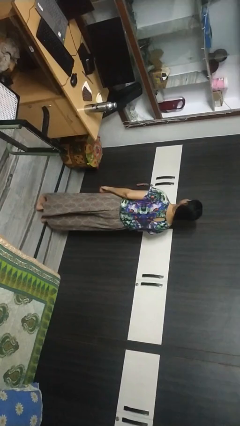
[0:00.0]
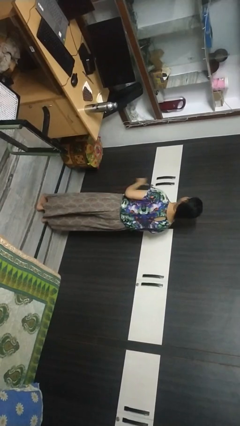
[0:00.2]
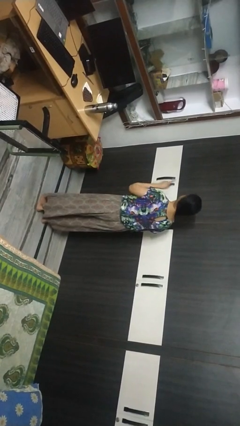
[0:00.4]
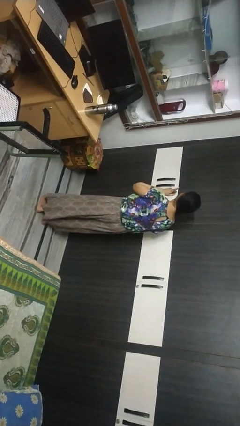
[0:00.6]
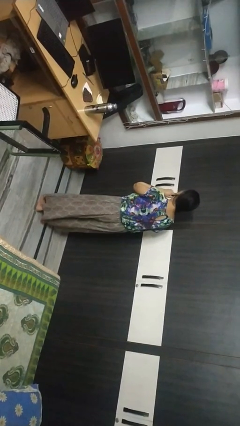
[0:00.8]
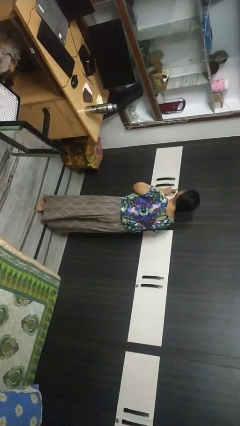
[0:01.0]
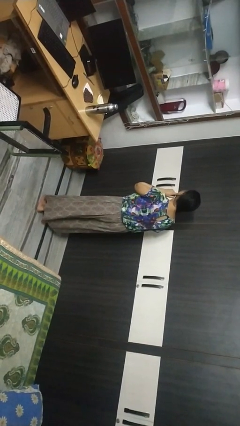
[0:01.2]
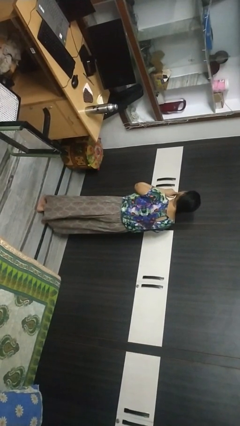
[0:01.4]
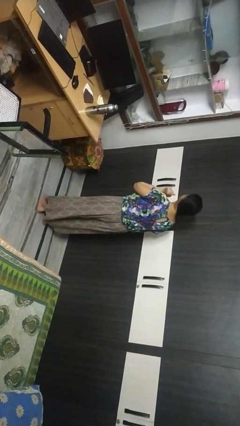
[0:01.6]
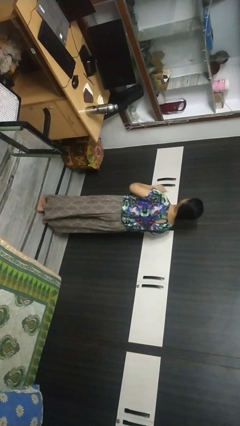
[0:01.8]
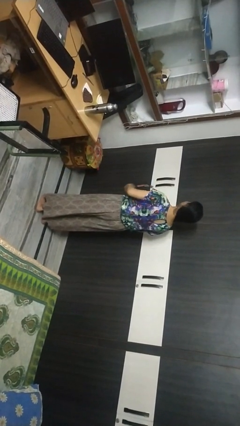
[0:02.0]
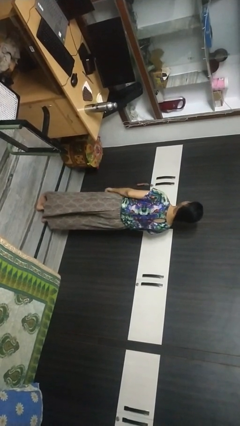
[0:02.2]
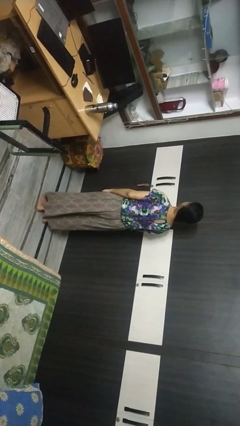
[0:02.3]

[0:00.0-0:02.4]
person gestures listen closely

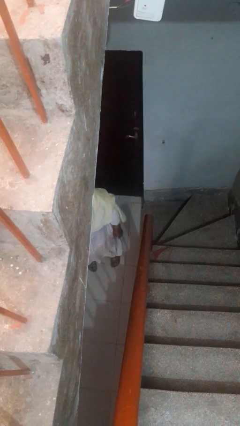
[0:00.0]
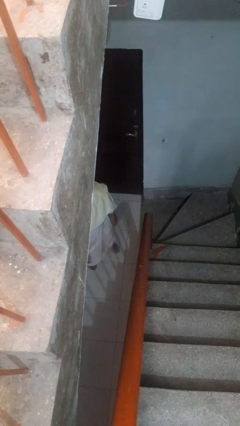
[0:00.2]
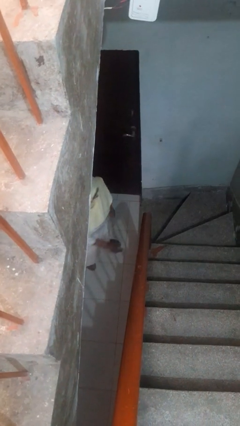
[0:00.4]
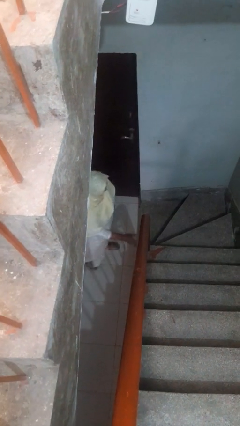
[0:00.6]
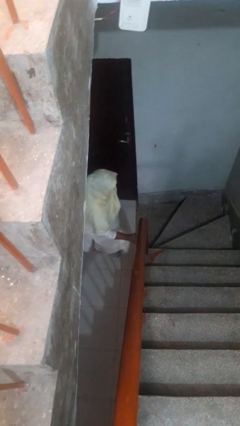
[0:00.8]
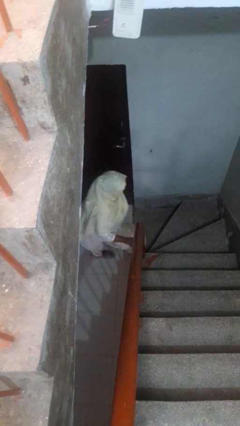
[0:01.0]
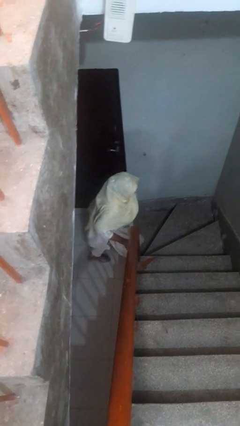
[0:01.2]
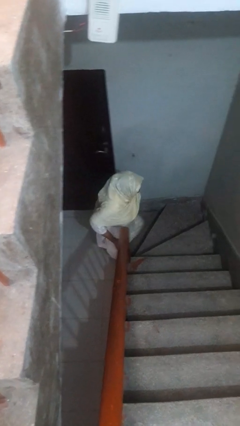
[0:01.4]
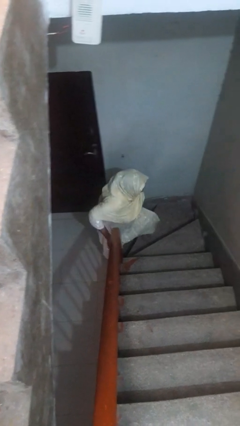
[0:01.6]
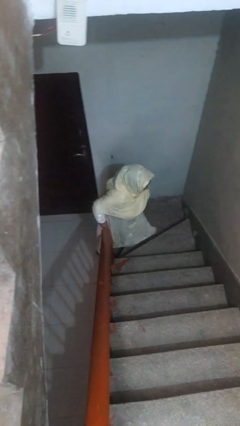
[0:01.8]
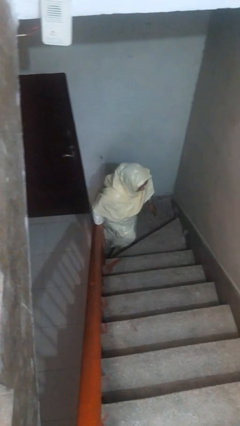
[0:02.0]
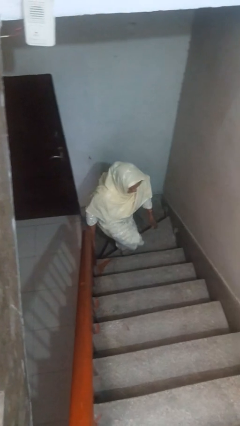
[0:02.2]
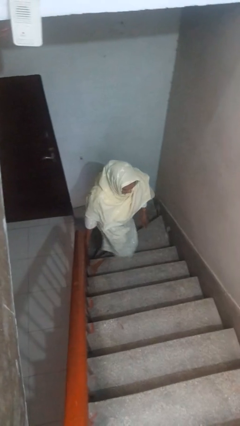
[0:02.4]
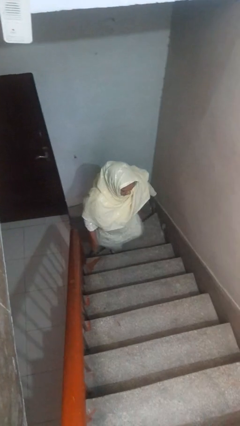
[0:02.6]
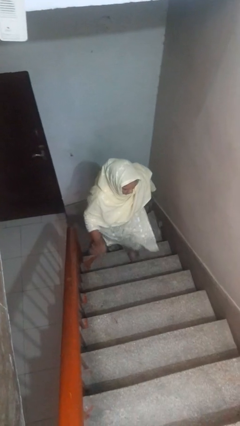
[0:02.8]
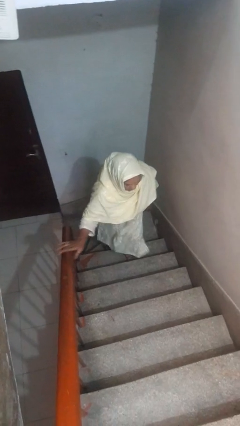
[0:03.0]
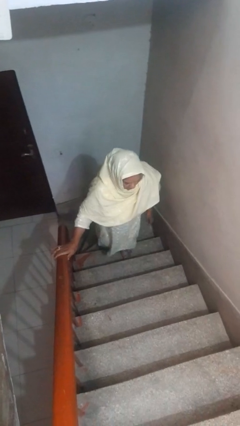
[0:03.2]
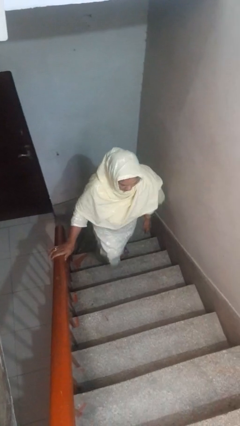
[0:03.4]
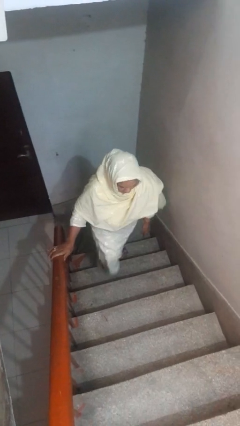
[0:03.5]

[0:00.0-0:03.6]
person climbs up stairs

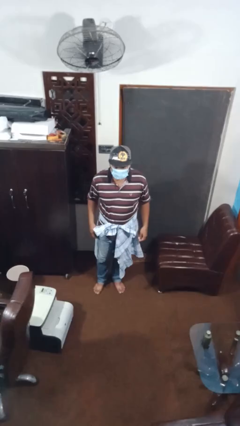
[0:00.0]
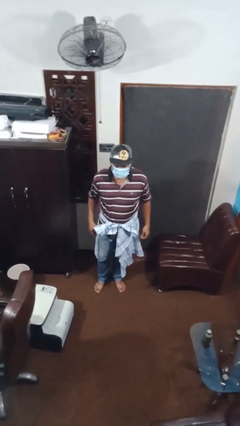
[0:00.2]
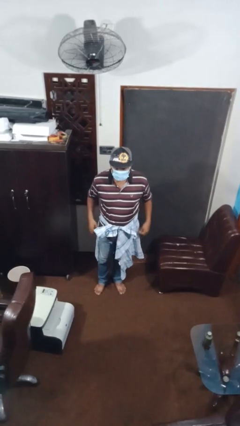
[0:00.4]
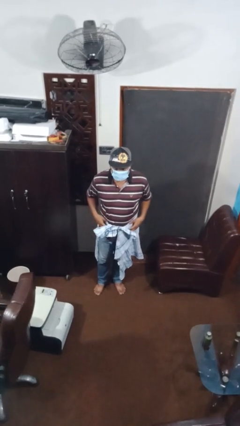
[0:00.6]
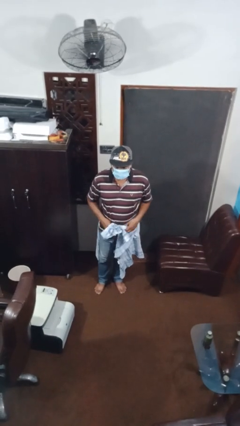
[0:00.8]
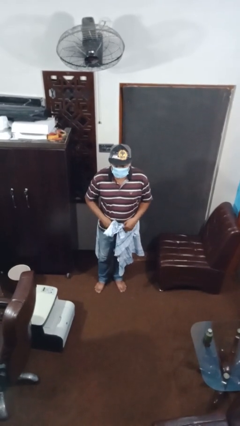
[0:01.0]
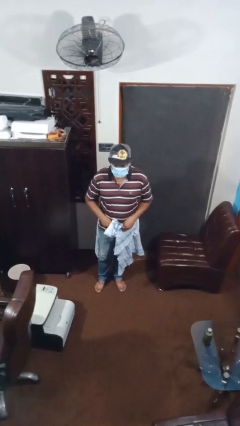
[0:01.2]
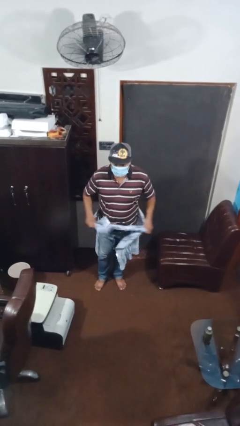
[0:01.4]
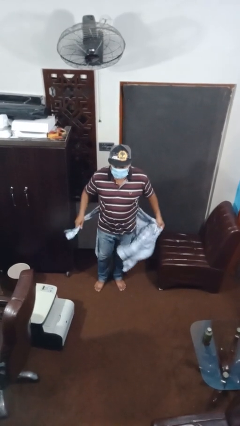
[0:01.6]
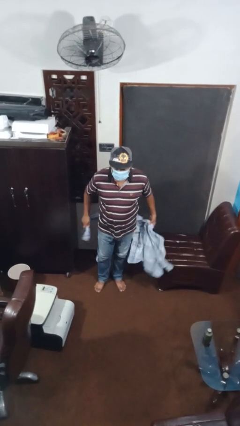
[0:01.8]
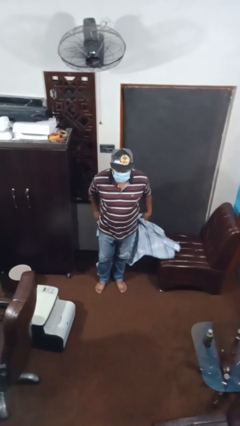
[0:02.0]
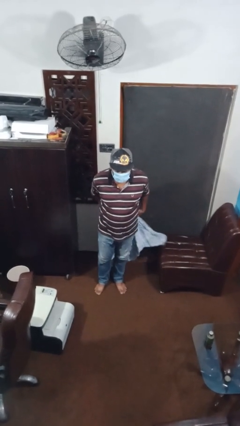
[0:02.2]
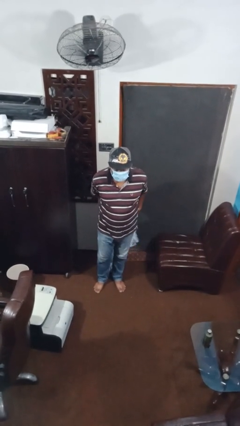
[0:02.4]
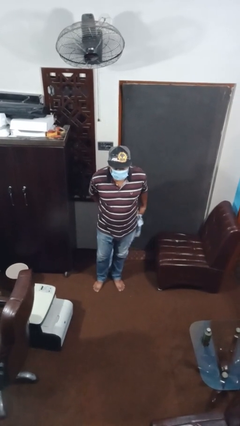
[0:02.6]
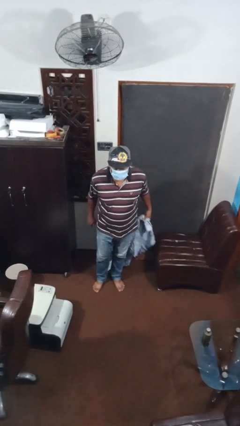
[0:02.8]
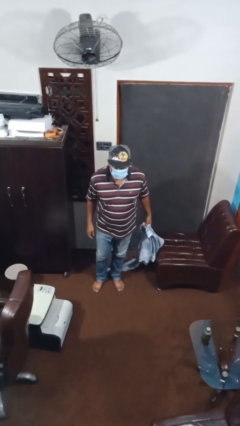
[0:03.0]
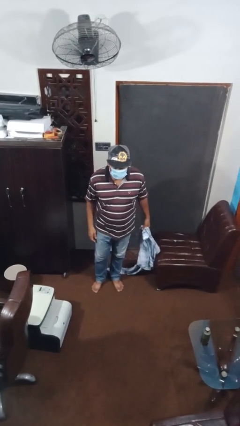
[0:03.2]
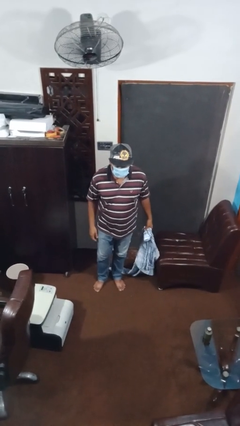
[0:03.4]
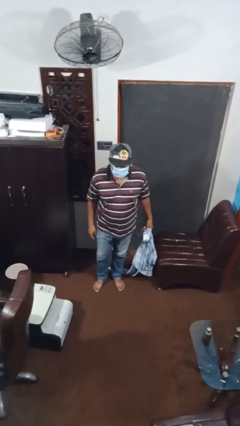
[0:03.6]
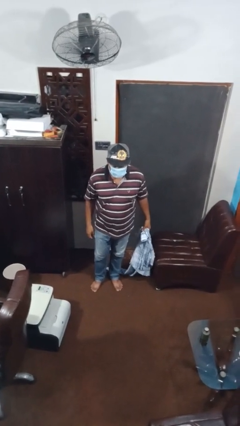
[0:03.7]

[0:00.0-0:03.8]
person unties jacket around waist

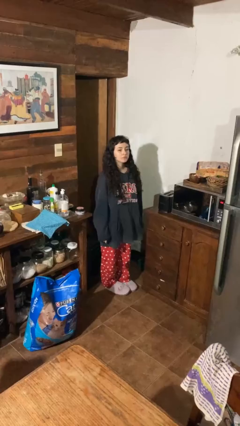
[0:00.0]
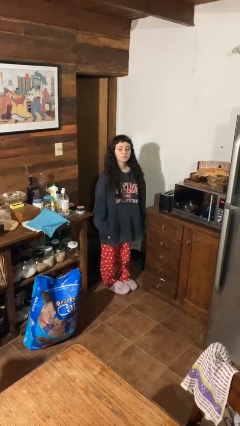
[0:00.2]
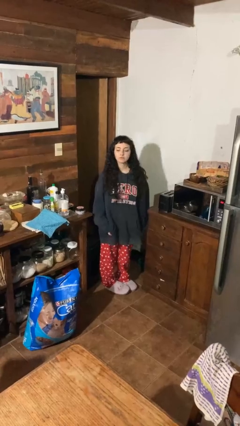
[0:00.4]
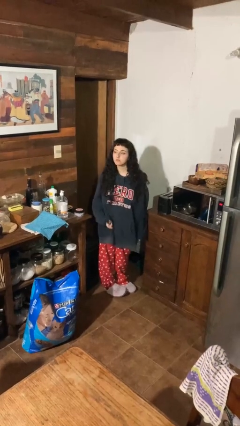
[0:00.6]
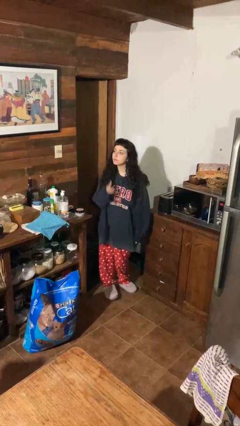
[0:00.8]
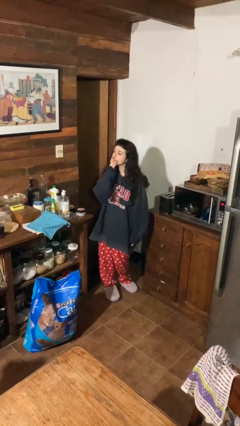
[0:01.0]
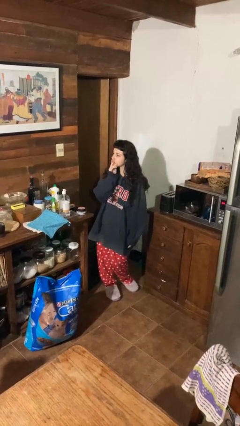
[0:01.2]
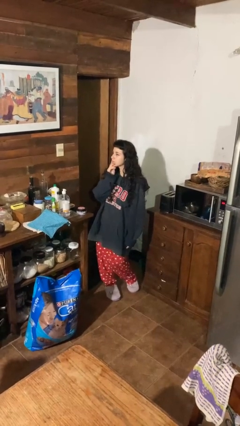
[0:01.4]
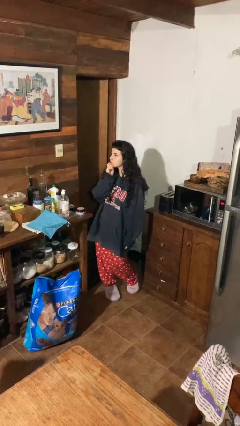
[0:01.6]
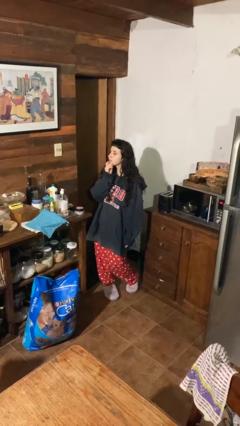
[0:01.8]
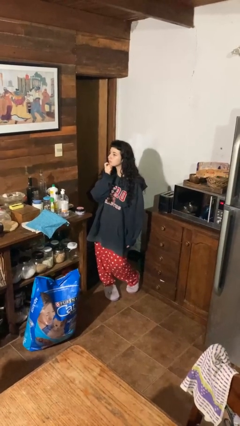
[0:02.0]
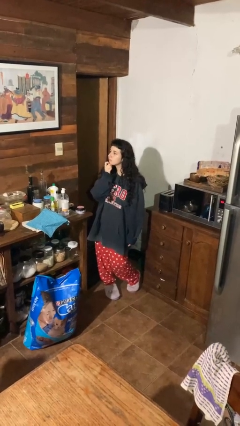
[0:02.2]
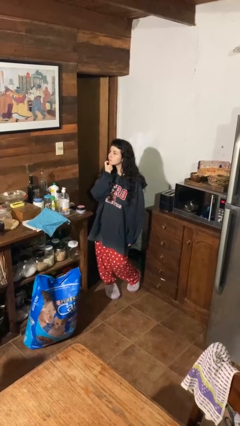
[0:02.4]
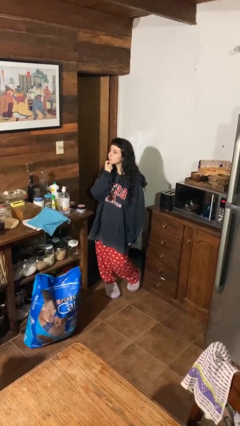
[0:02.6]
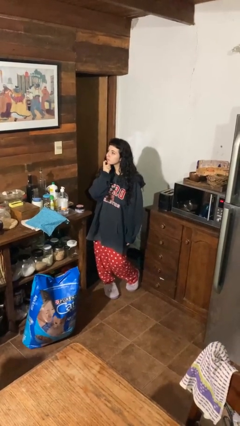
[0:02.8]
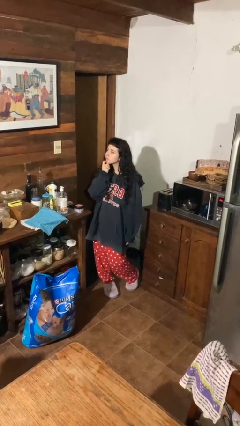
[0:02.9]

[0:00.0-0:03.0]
person strokes chin

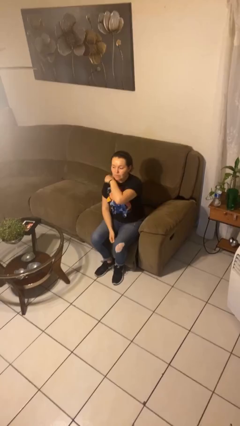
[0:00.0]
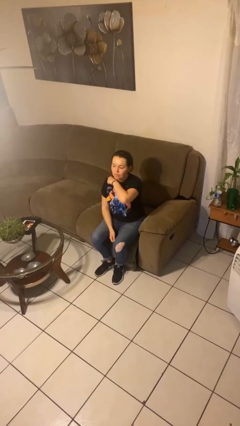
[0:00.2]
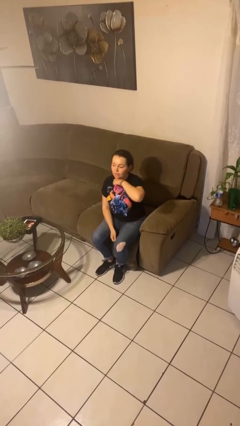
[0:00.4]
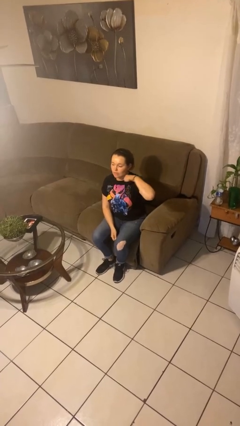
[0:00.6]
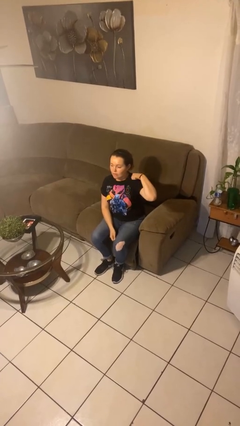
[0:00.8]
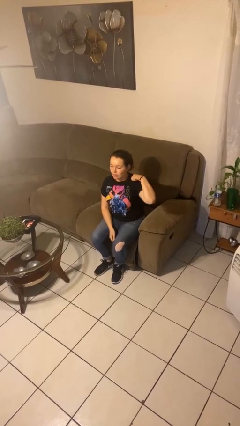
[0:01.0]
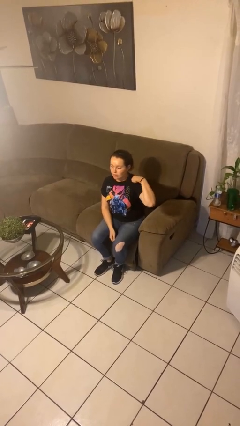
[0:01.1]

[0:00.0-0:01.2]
person gestures cut

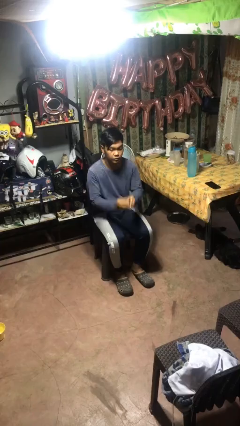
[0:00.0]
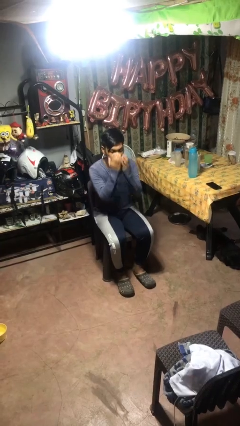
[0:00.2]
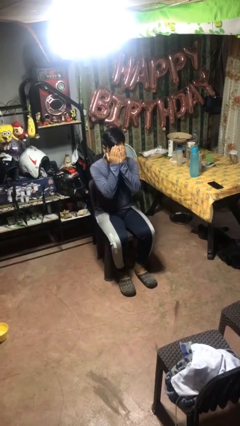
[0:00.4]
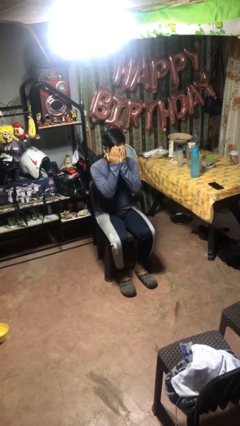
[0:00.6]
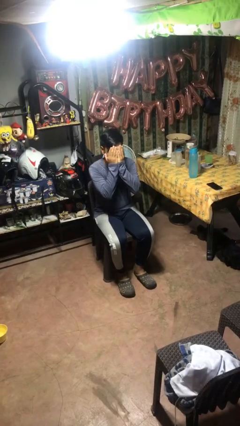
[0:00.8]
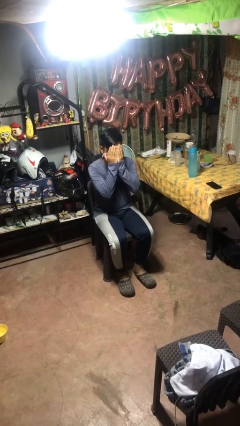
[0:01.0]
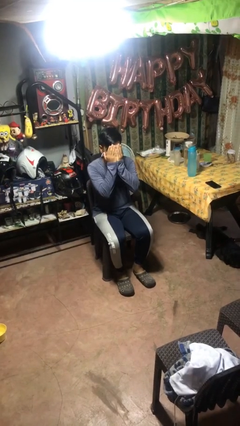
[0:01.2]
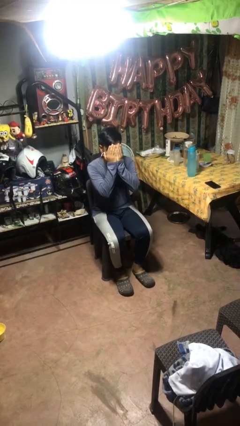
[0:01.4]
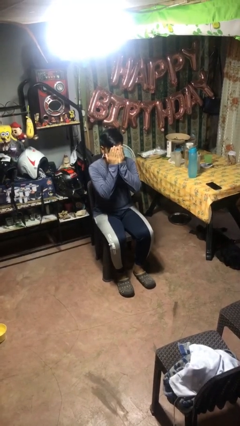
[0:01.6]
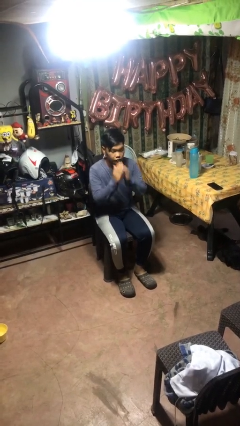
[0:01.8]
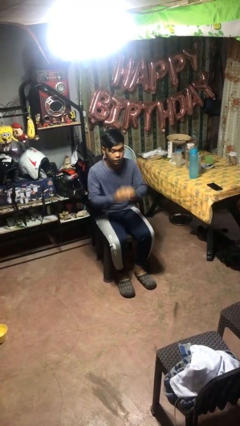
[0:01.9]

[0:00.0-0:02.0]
person covers face with hands

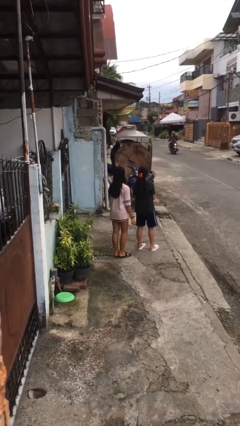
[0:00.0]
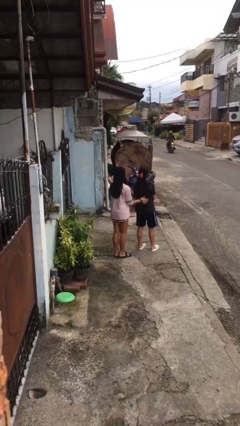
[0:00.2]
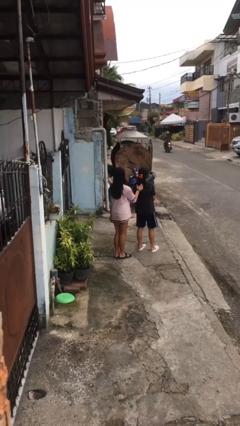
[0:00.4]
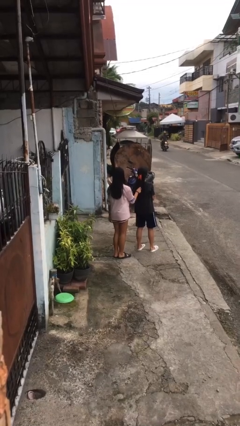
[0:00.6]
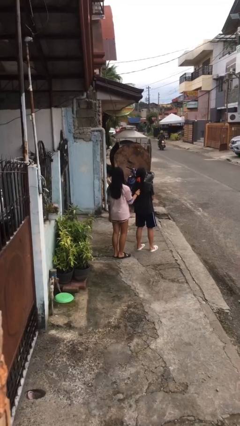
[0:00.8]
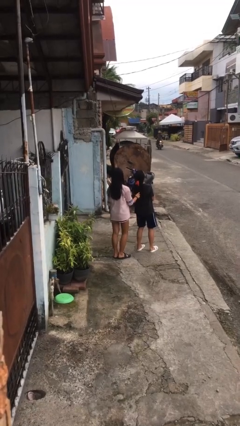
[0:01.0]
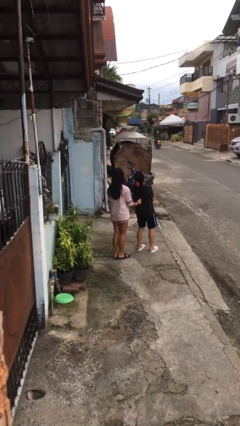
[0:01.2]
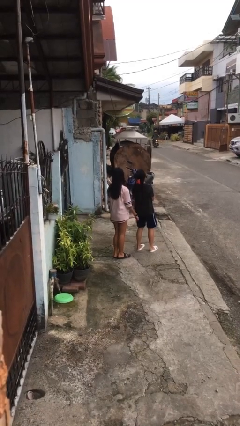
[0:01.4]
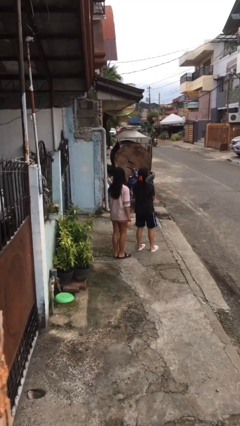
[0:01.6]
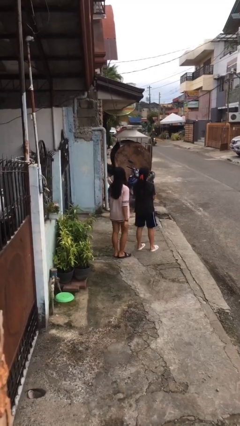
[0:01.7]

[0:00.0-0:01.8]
person grabs person by hair
